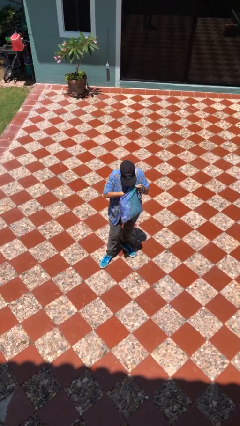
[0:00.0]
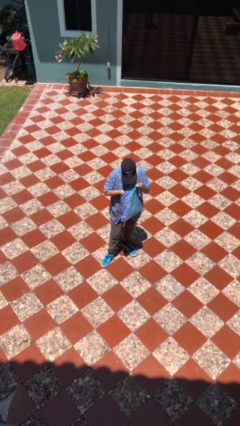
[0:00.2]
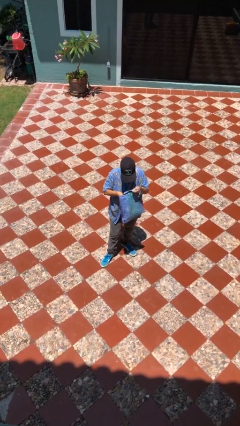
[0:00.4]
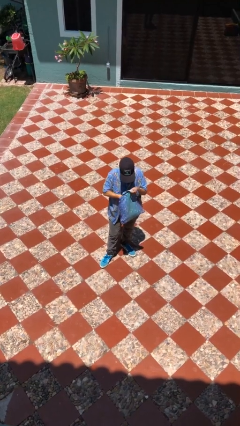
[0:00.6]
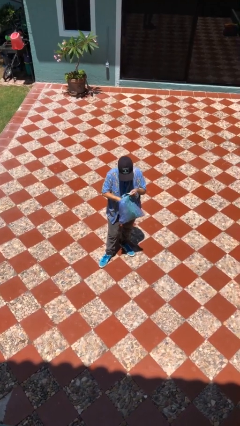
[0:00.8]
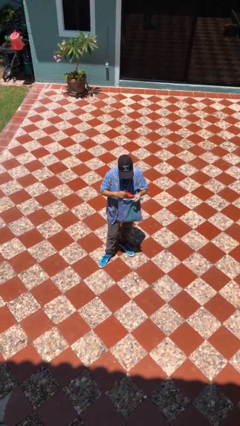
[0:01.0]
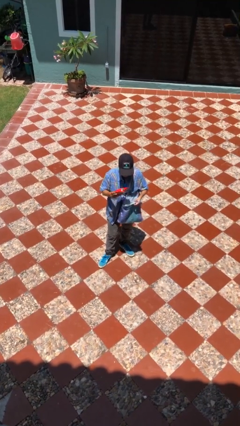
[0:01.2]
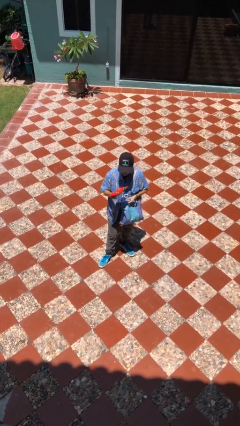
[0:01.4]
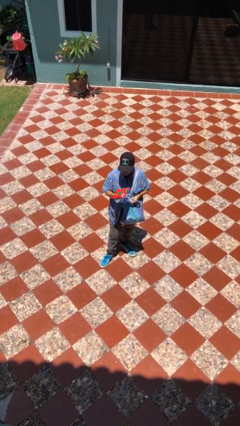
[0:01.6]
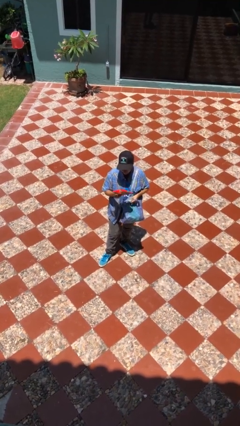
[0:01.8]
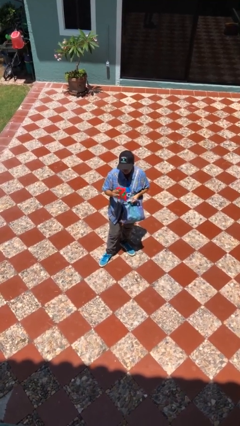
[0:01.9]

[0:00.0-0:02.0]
person takes object from purse

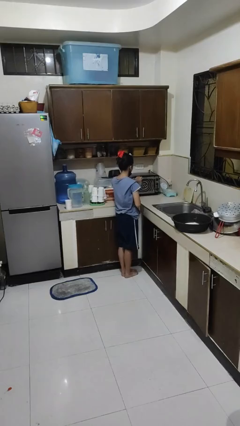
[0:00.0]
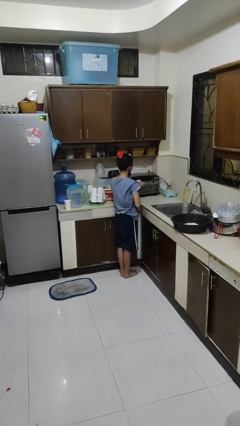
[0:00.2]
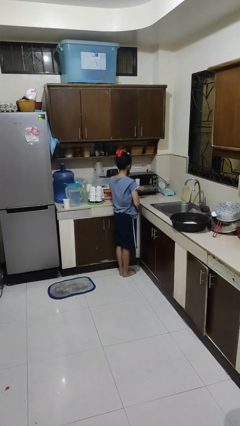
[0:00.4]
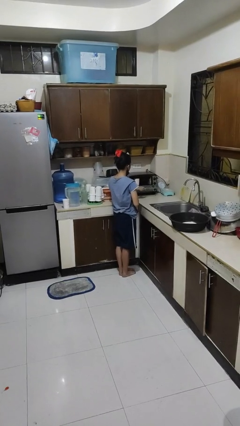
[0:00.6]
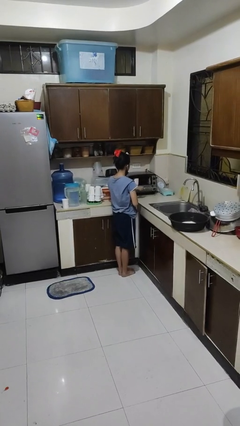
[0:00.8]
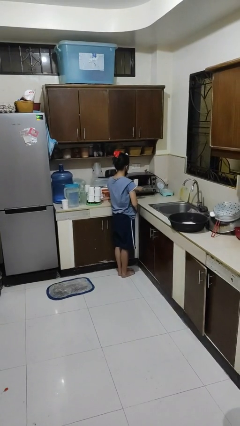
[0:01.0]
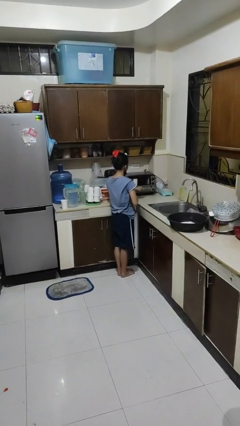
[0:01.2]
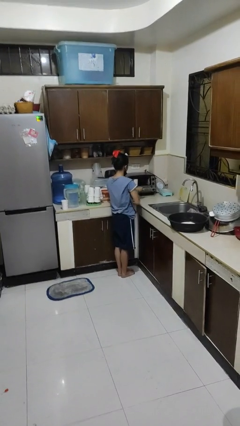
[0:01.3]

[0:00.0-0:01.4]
person opens microwave

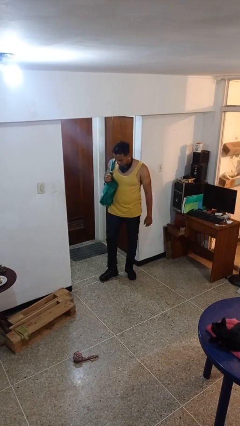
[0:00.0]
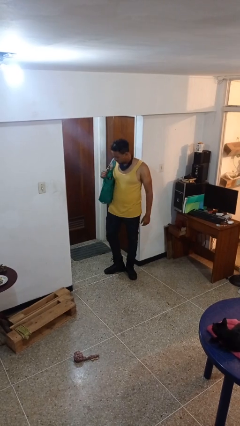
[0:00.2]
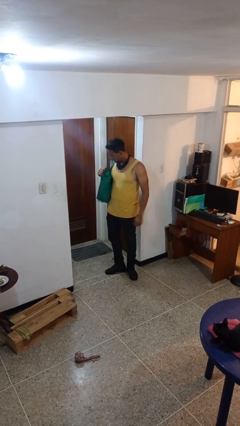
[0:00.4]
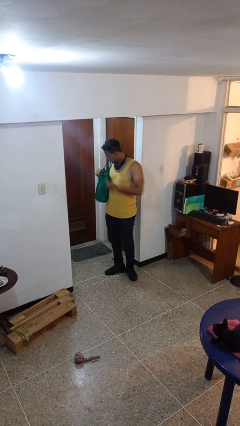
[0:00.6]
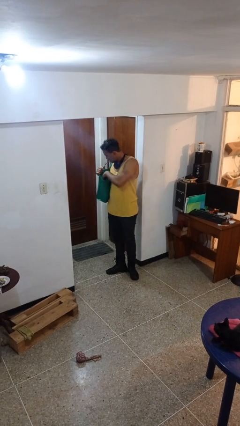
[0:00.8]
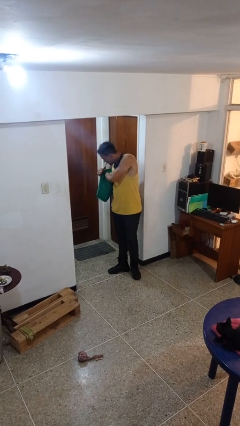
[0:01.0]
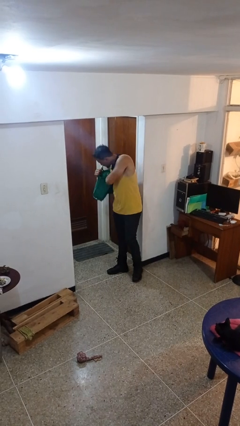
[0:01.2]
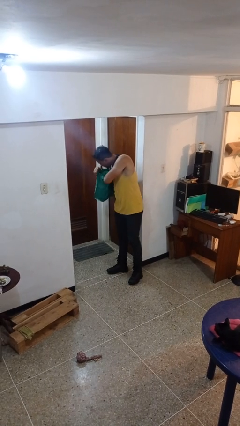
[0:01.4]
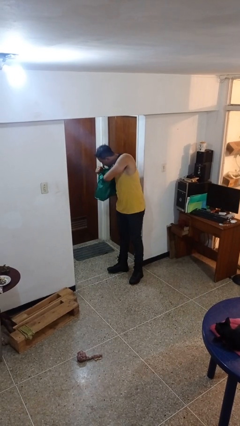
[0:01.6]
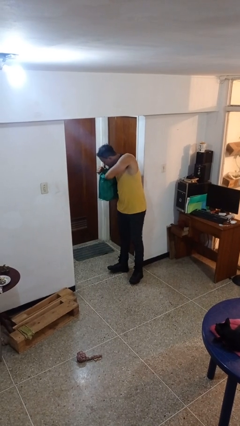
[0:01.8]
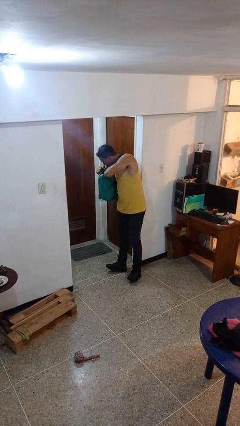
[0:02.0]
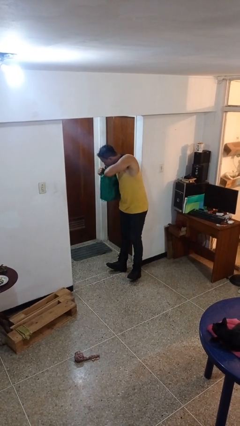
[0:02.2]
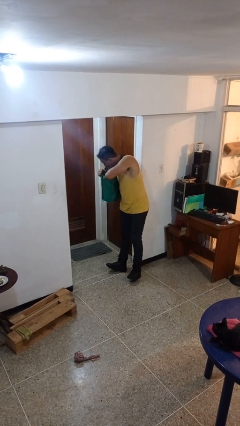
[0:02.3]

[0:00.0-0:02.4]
person searches in purse

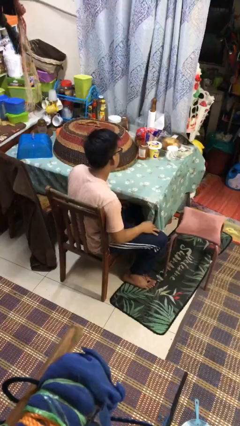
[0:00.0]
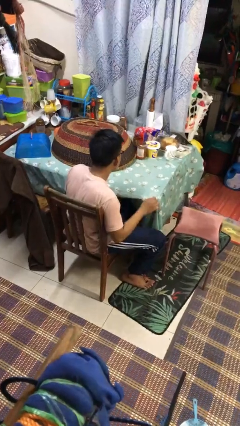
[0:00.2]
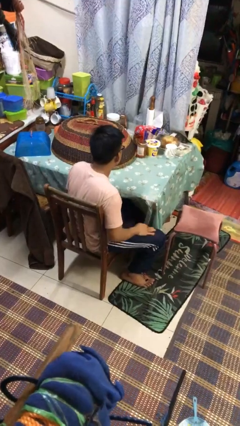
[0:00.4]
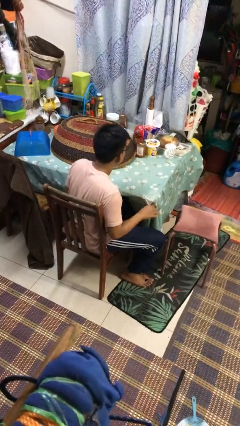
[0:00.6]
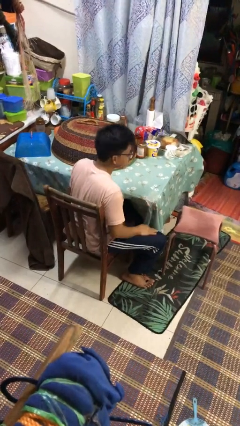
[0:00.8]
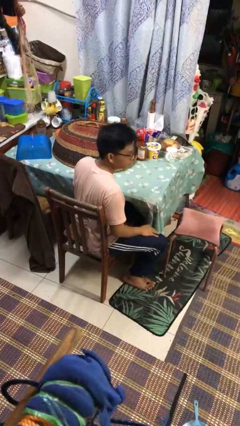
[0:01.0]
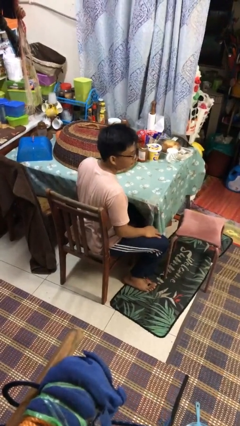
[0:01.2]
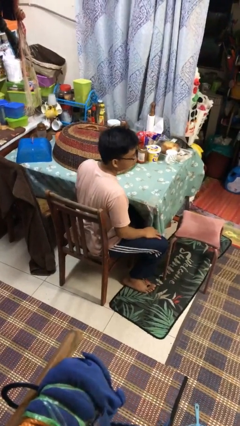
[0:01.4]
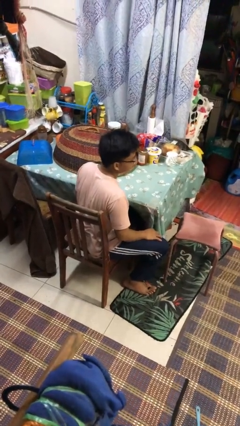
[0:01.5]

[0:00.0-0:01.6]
person slaps hands on thighs

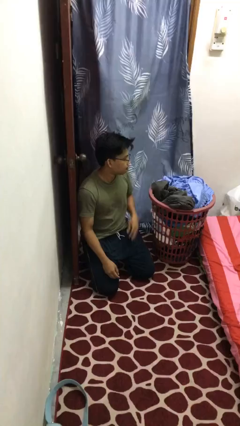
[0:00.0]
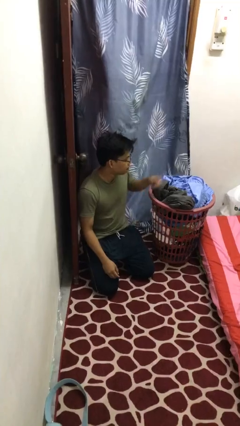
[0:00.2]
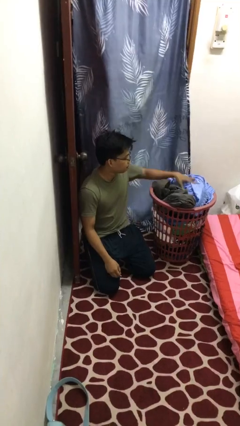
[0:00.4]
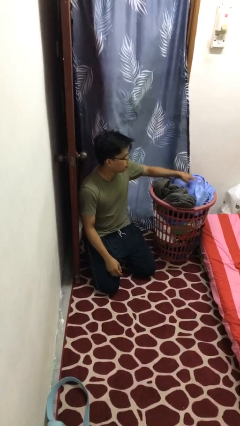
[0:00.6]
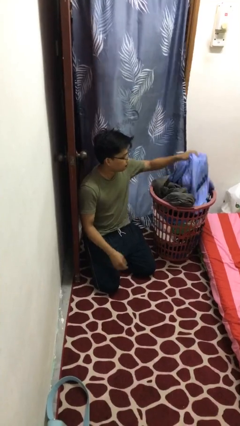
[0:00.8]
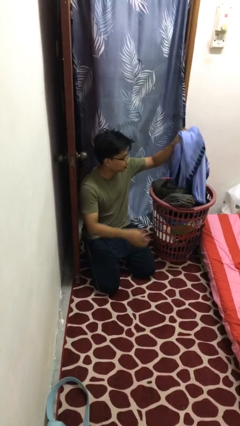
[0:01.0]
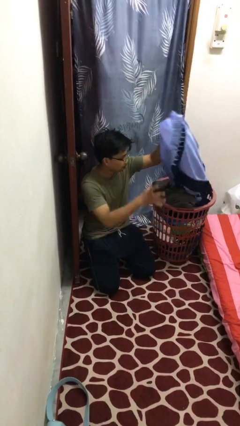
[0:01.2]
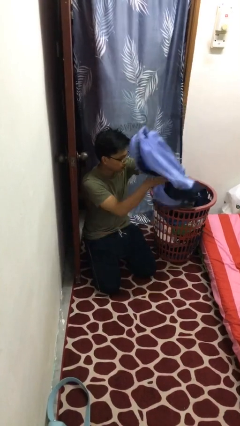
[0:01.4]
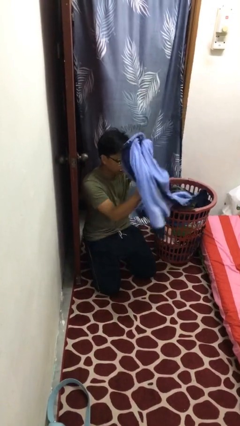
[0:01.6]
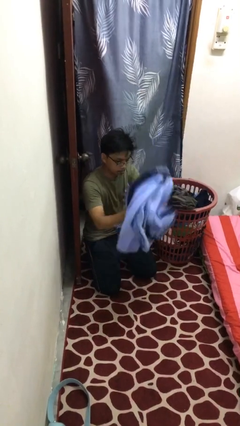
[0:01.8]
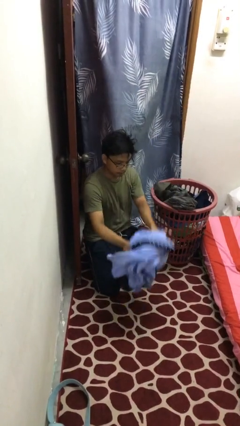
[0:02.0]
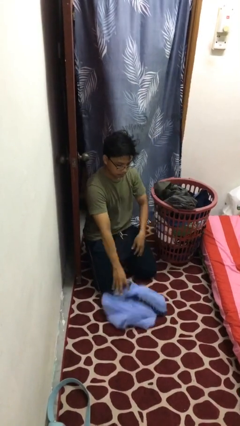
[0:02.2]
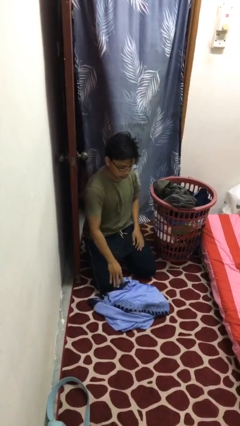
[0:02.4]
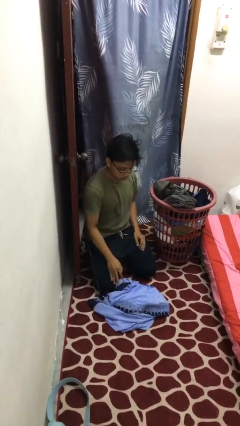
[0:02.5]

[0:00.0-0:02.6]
person takes object from basket

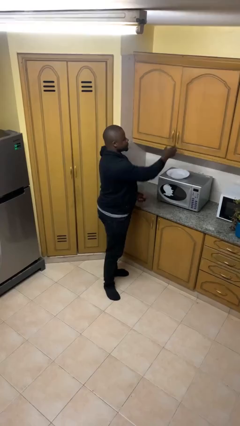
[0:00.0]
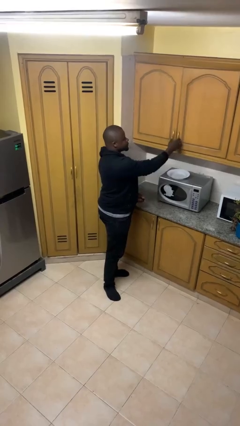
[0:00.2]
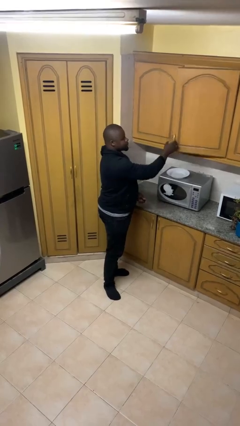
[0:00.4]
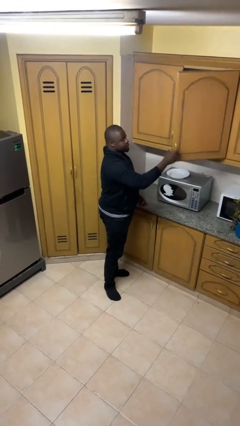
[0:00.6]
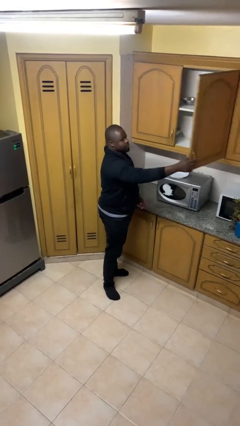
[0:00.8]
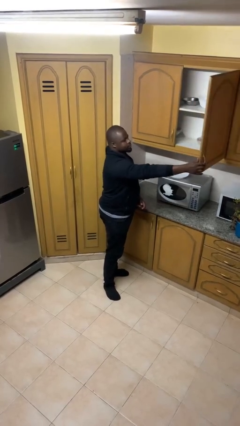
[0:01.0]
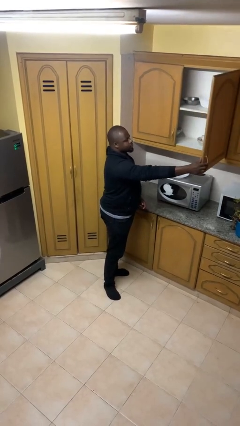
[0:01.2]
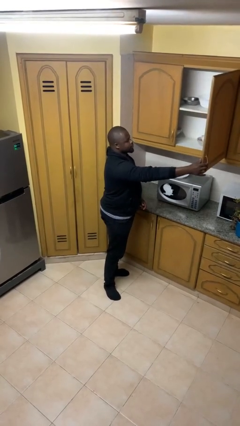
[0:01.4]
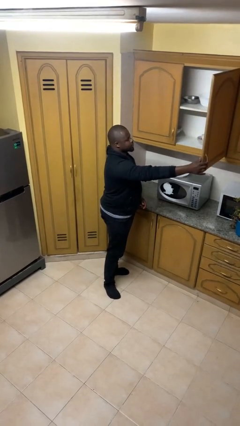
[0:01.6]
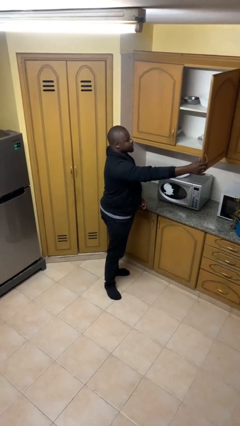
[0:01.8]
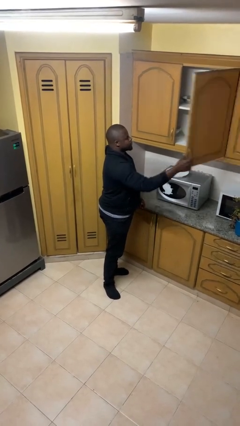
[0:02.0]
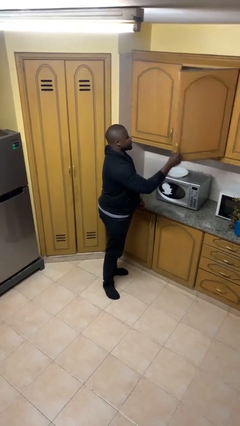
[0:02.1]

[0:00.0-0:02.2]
person opens cabinet

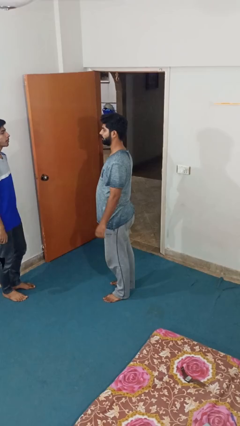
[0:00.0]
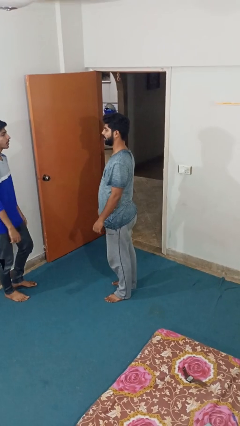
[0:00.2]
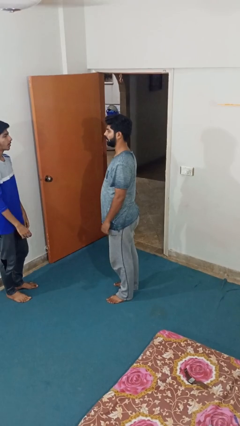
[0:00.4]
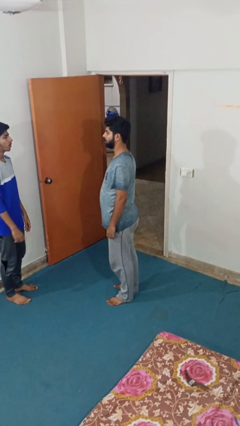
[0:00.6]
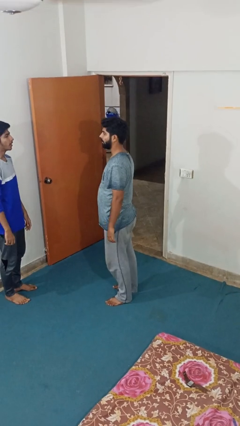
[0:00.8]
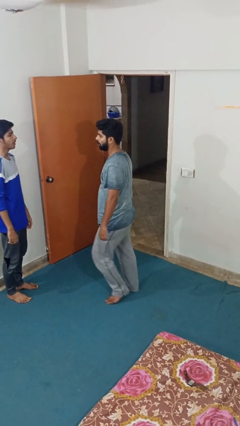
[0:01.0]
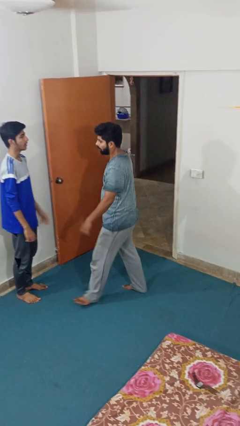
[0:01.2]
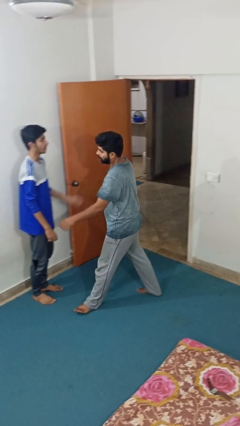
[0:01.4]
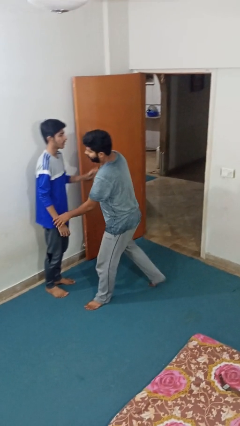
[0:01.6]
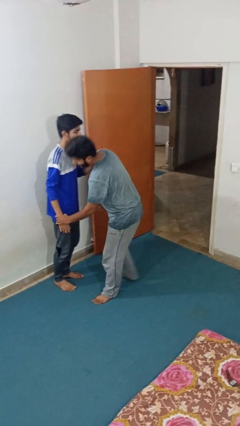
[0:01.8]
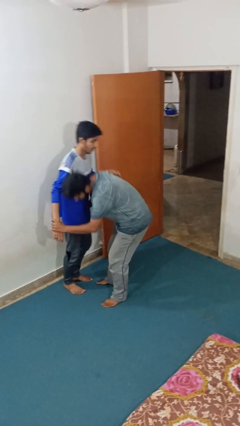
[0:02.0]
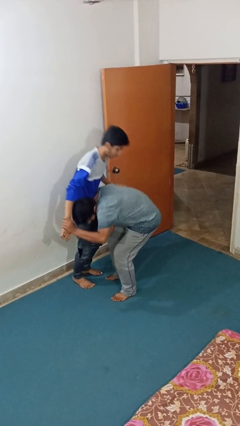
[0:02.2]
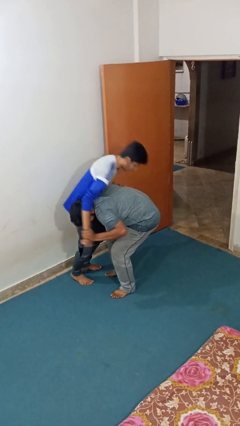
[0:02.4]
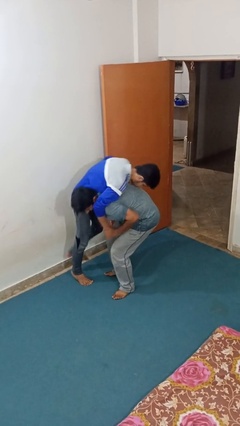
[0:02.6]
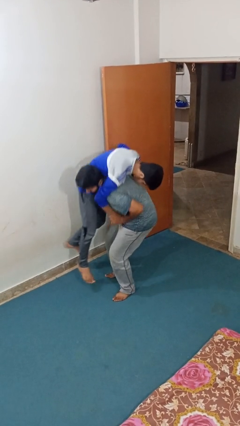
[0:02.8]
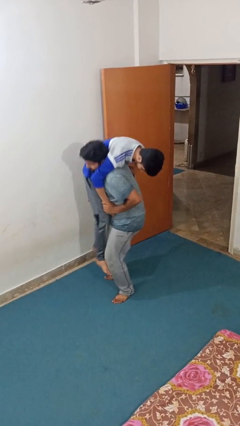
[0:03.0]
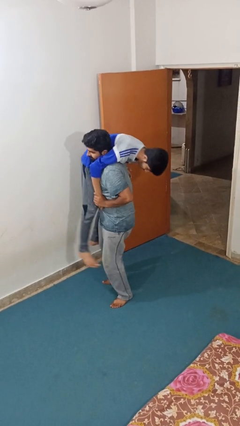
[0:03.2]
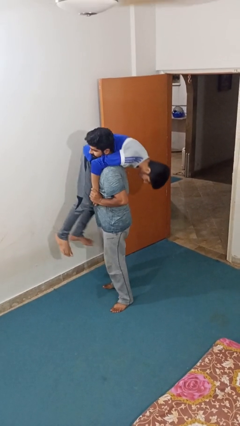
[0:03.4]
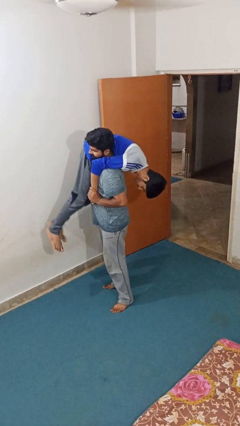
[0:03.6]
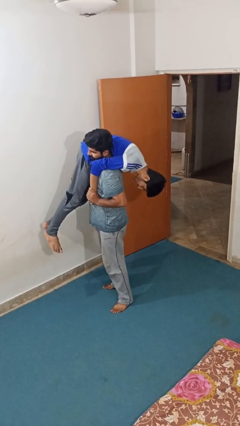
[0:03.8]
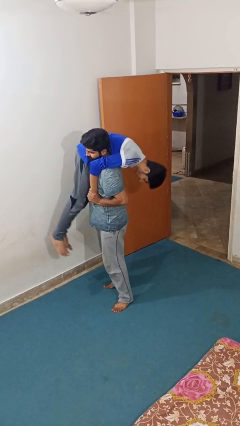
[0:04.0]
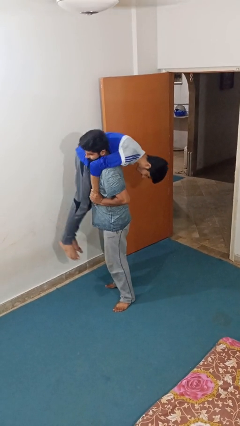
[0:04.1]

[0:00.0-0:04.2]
person carries person over shoulder

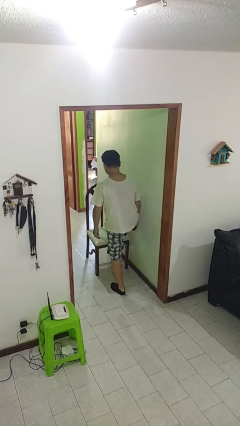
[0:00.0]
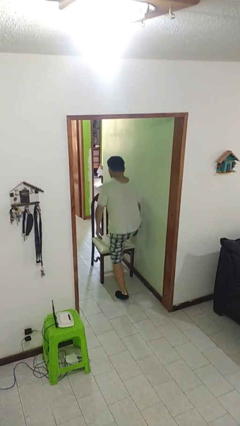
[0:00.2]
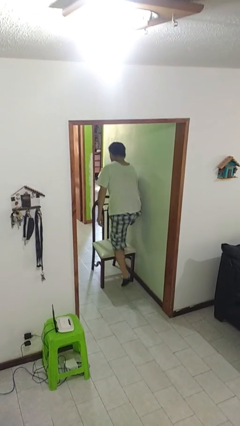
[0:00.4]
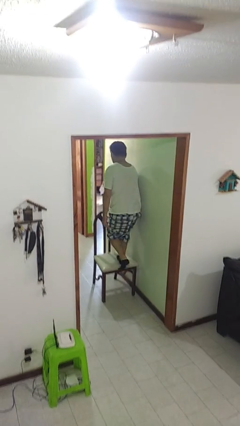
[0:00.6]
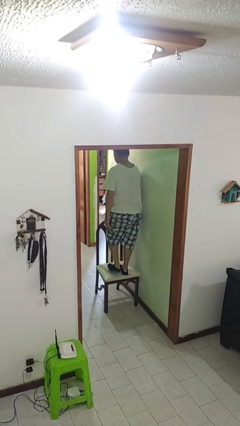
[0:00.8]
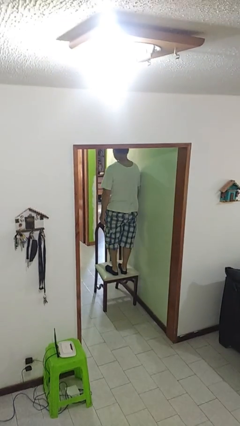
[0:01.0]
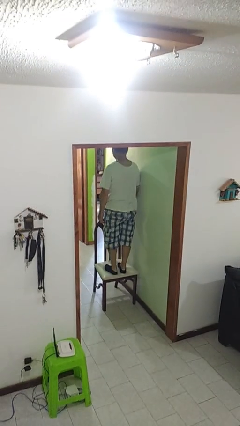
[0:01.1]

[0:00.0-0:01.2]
person climbs on chair
